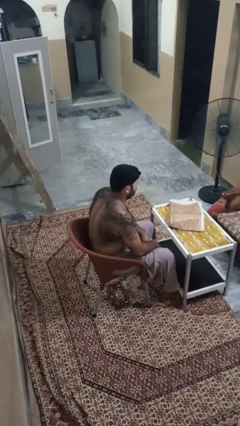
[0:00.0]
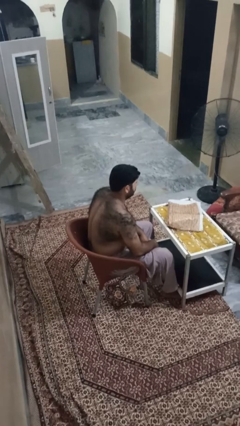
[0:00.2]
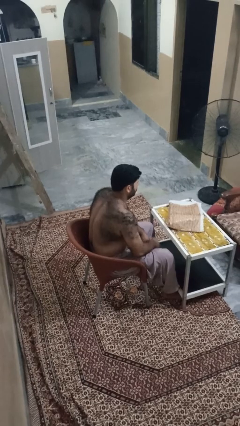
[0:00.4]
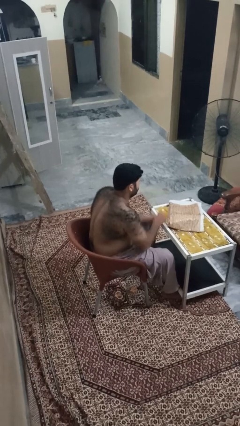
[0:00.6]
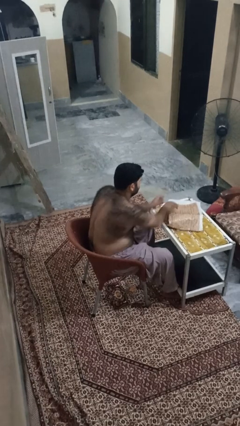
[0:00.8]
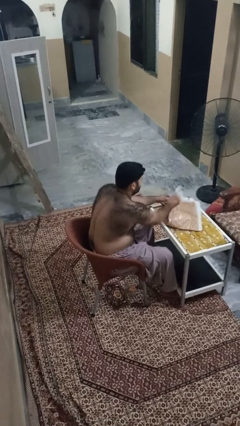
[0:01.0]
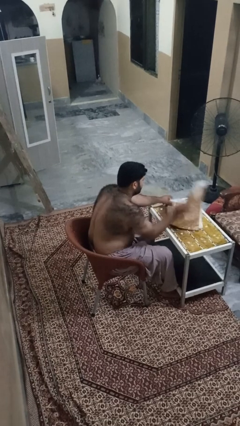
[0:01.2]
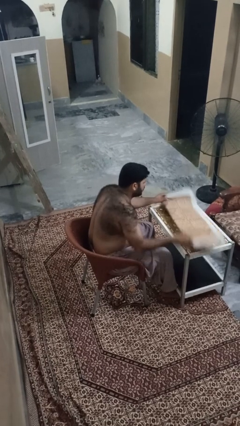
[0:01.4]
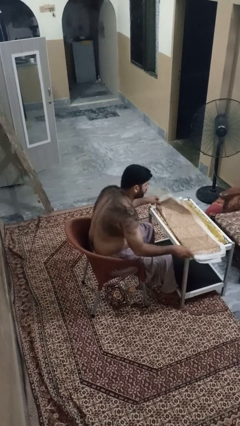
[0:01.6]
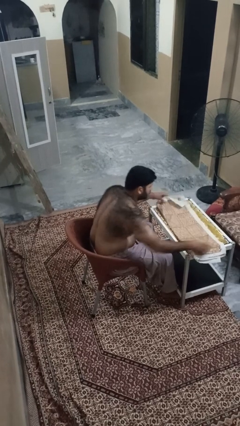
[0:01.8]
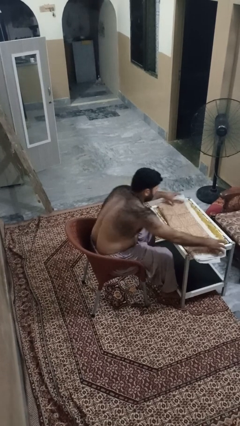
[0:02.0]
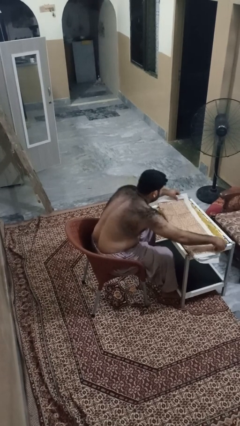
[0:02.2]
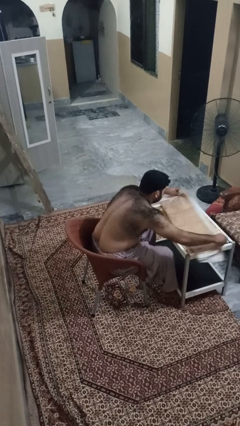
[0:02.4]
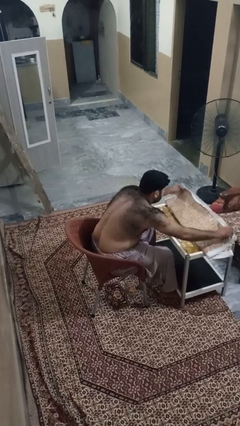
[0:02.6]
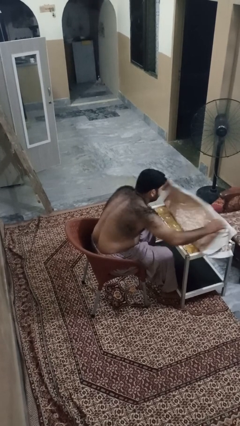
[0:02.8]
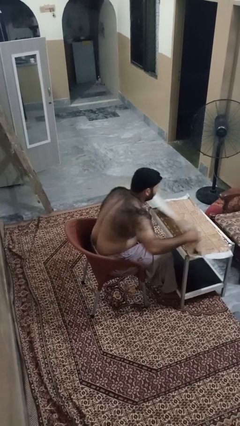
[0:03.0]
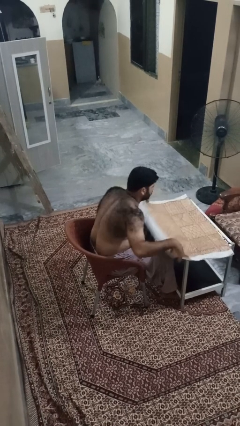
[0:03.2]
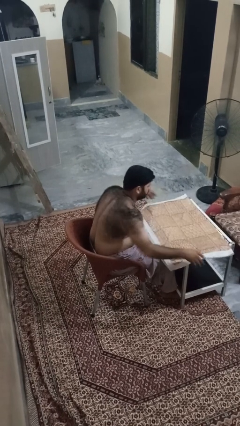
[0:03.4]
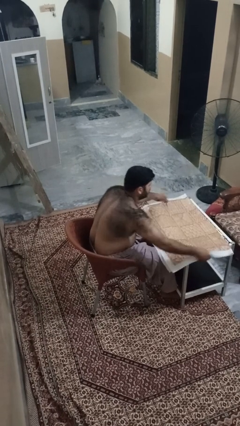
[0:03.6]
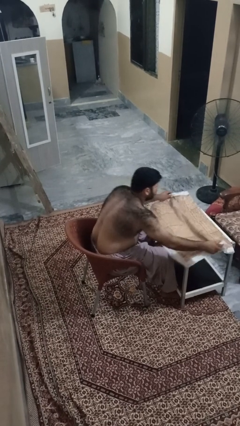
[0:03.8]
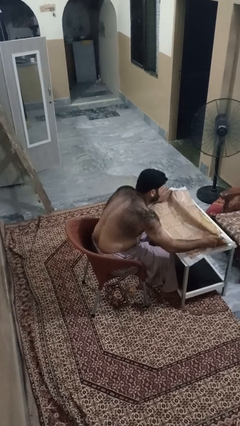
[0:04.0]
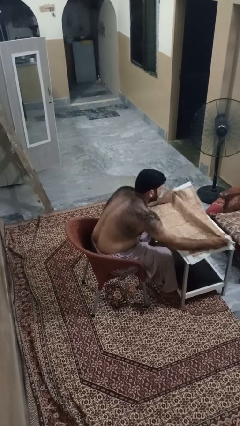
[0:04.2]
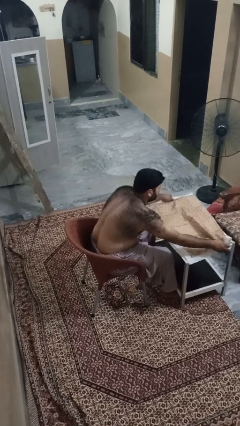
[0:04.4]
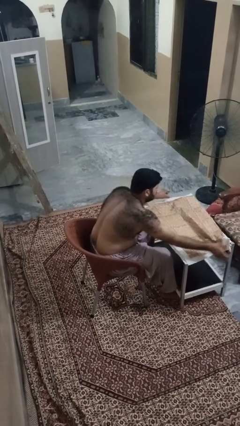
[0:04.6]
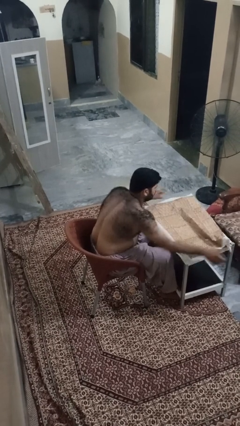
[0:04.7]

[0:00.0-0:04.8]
person spreads tablecloth

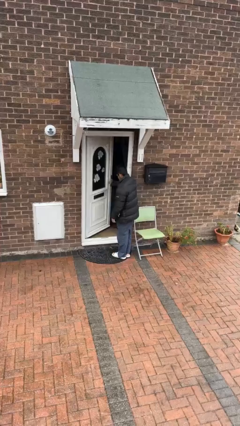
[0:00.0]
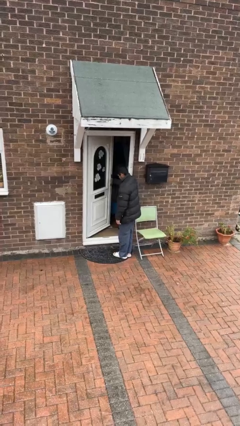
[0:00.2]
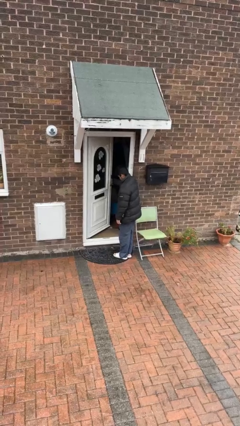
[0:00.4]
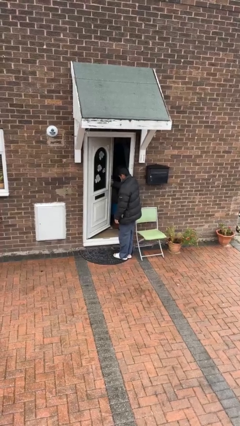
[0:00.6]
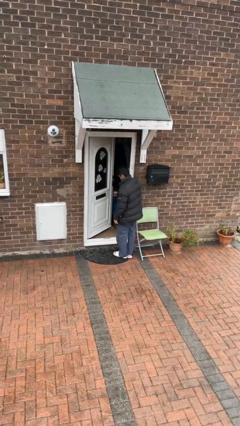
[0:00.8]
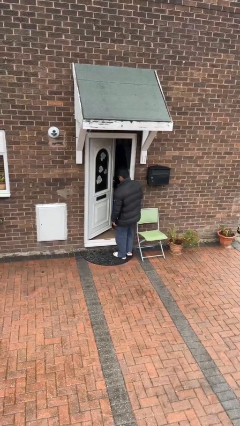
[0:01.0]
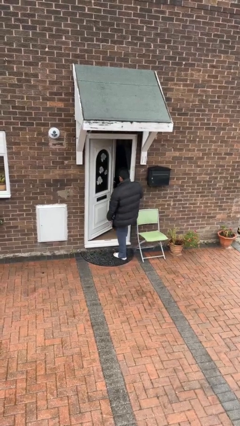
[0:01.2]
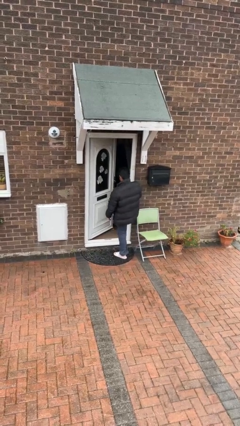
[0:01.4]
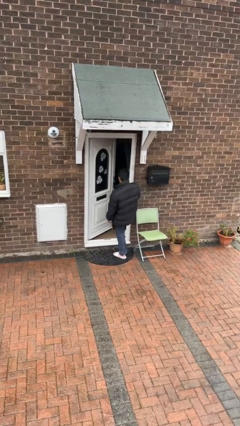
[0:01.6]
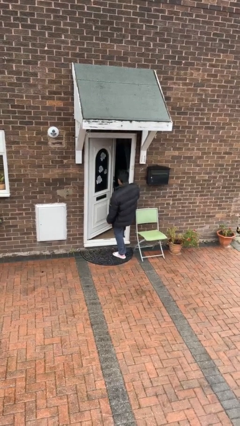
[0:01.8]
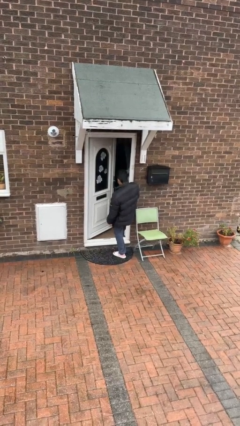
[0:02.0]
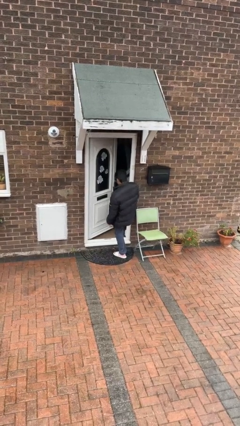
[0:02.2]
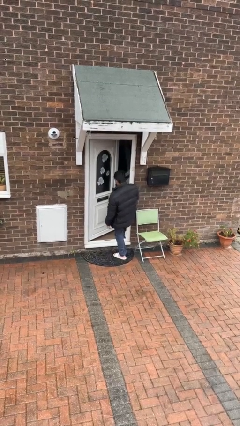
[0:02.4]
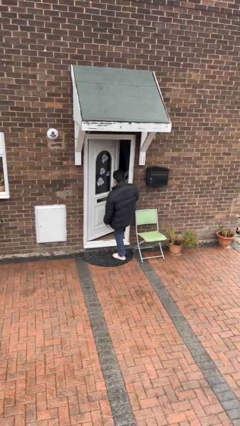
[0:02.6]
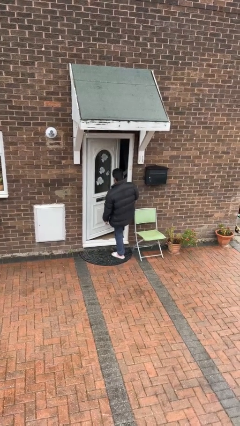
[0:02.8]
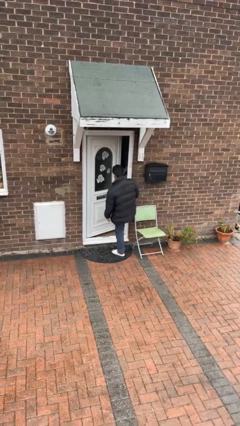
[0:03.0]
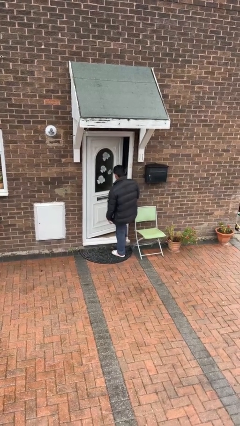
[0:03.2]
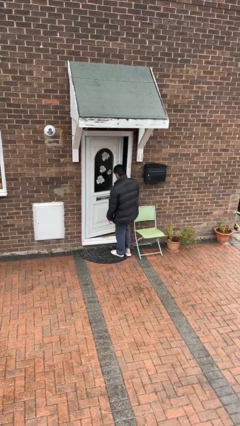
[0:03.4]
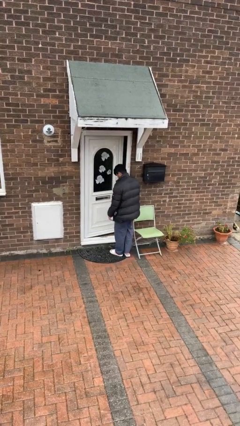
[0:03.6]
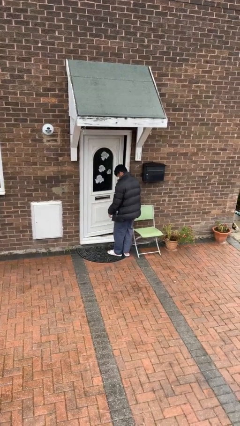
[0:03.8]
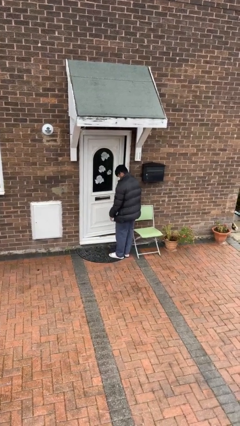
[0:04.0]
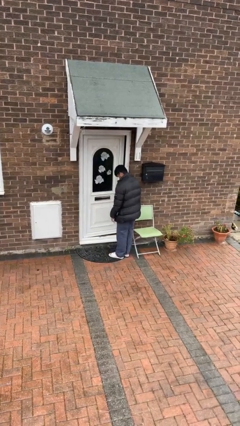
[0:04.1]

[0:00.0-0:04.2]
person closes door with foot

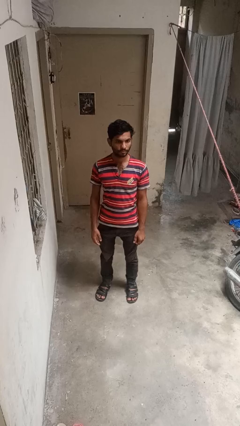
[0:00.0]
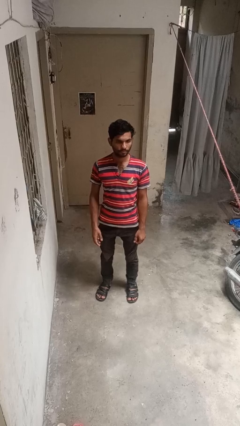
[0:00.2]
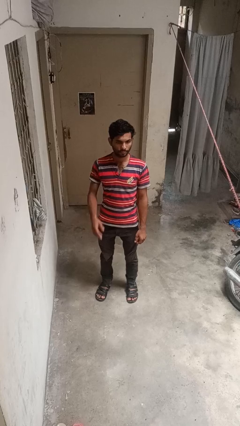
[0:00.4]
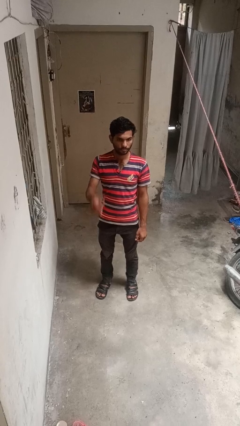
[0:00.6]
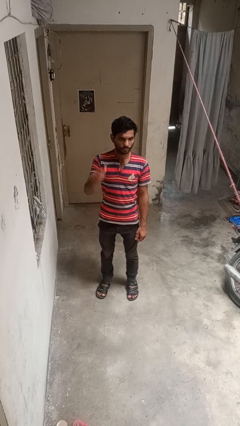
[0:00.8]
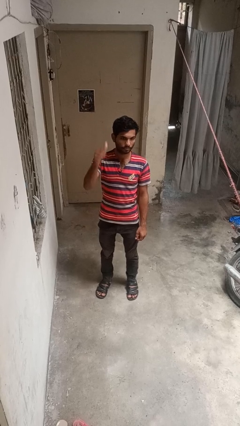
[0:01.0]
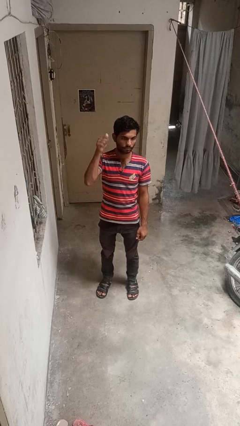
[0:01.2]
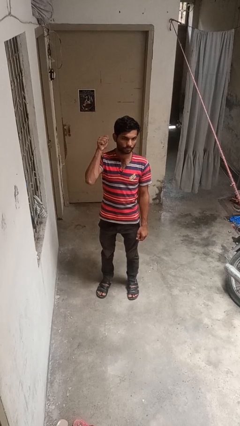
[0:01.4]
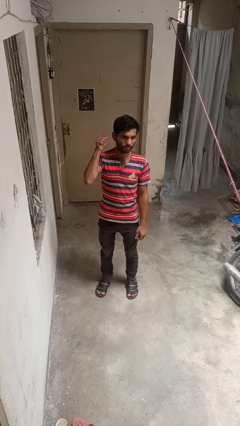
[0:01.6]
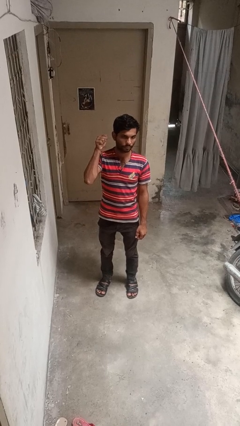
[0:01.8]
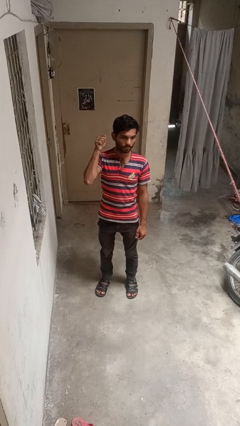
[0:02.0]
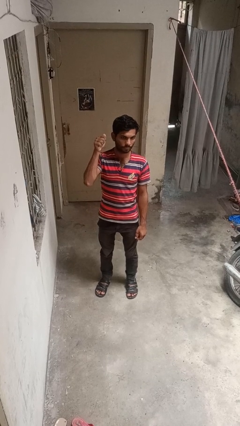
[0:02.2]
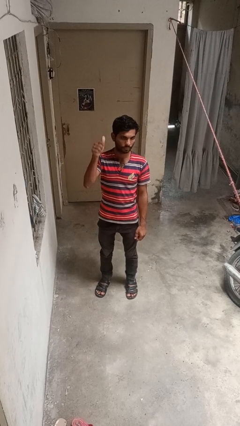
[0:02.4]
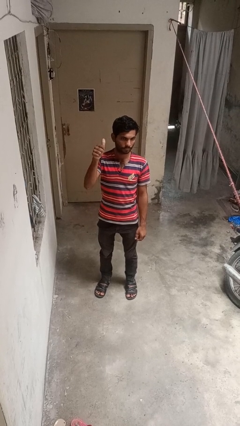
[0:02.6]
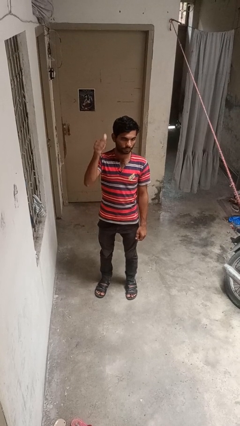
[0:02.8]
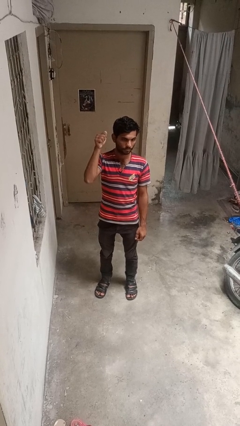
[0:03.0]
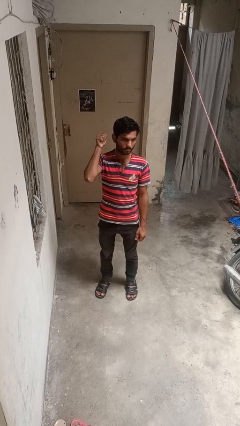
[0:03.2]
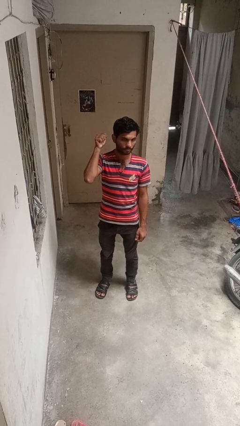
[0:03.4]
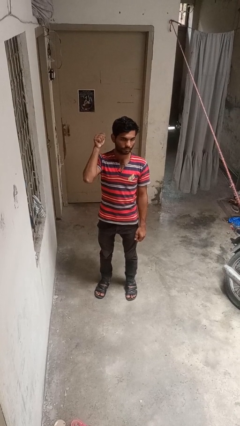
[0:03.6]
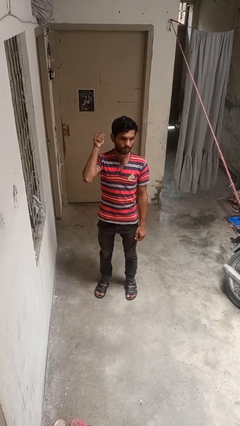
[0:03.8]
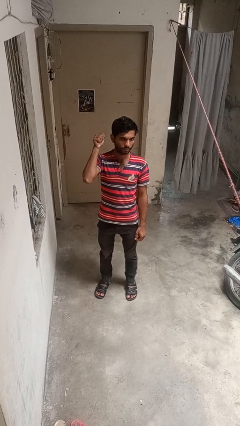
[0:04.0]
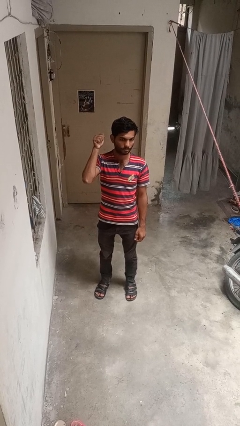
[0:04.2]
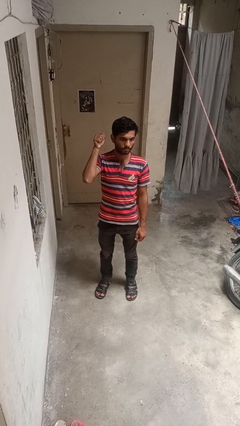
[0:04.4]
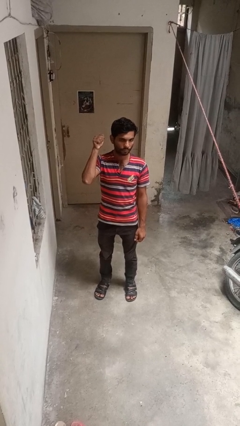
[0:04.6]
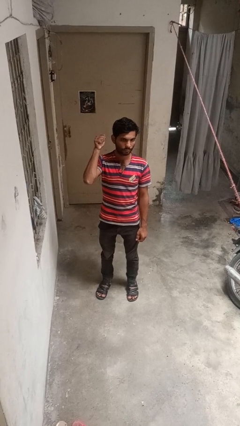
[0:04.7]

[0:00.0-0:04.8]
person gestures behind me

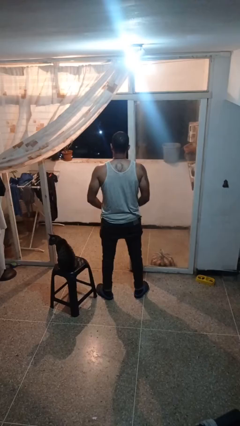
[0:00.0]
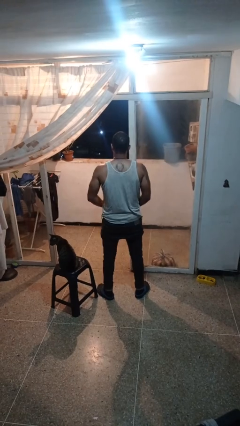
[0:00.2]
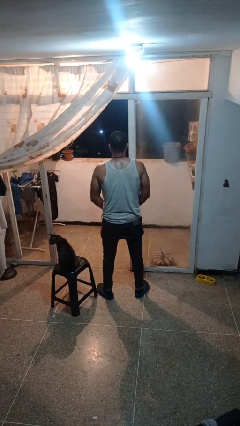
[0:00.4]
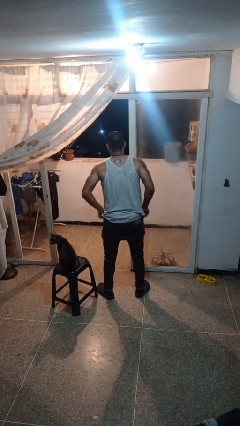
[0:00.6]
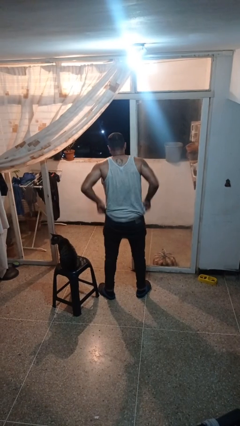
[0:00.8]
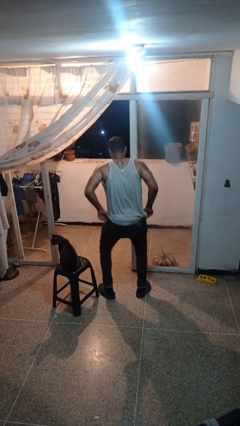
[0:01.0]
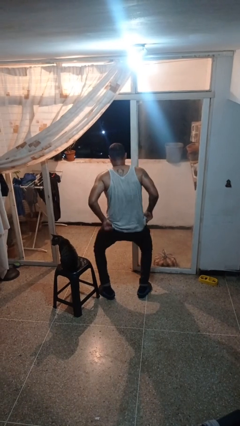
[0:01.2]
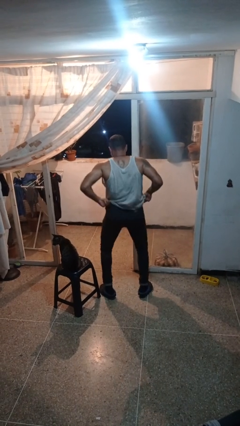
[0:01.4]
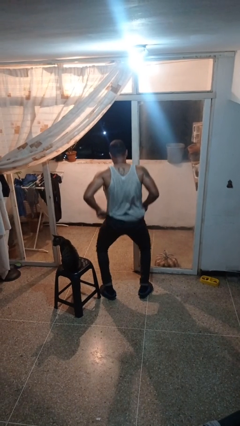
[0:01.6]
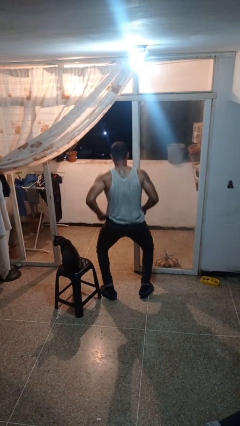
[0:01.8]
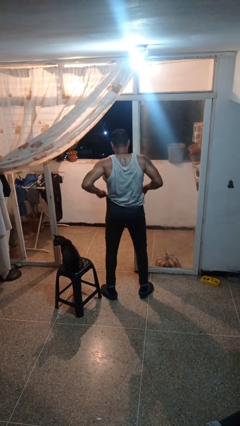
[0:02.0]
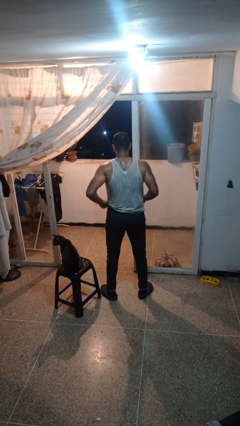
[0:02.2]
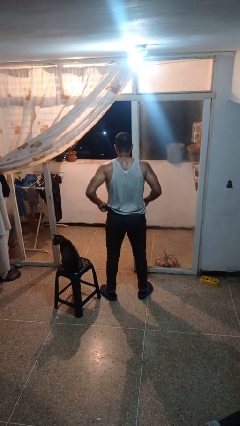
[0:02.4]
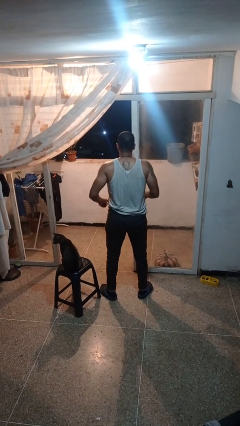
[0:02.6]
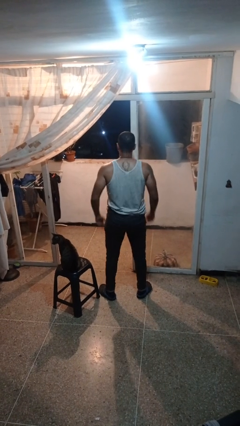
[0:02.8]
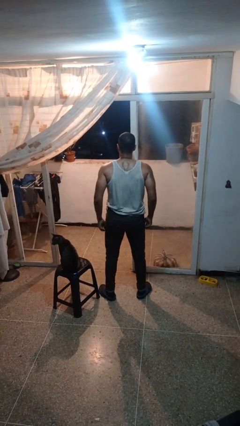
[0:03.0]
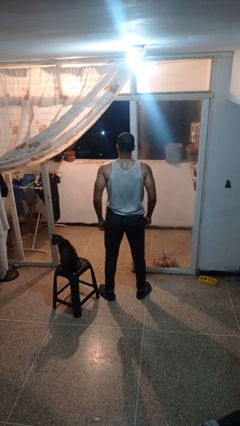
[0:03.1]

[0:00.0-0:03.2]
person hikes up pants

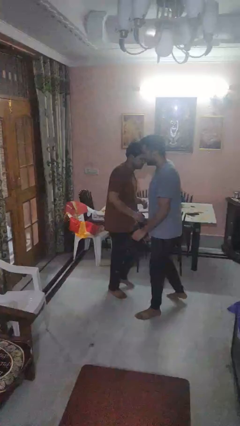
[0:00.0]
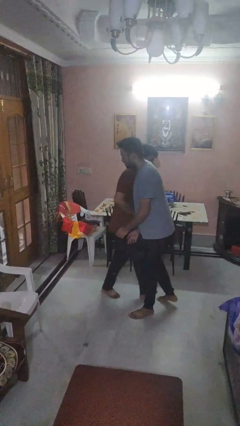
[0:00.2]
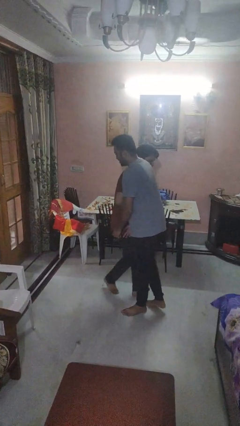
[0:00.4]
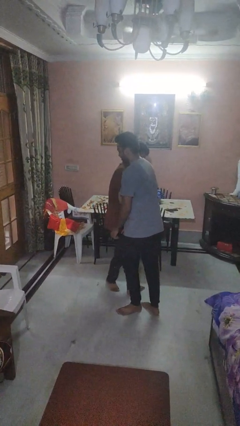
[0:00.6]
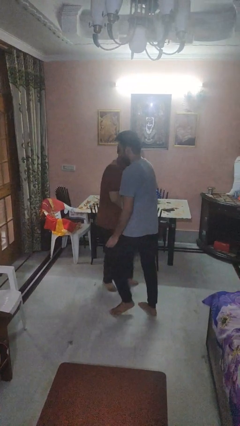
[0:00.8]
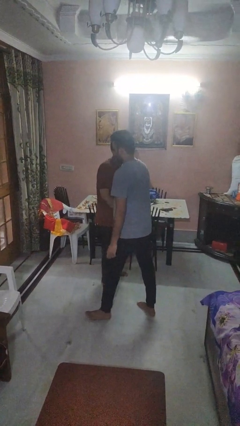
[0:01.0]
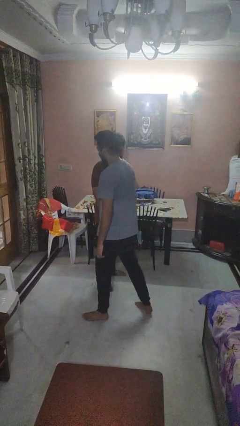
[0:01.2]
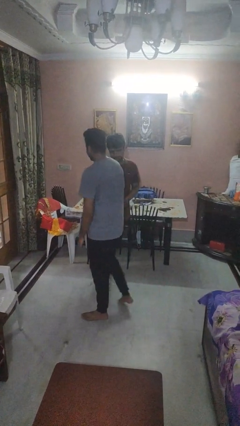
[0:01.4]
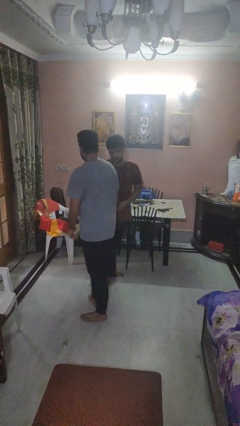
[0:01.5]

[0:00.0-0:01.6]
person bumps into person
